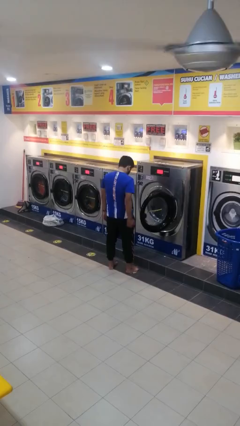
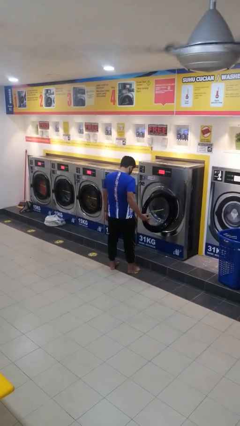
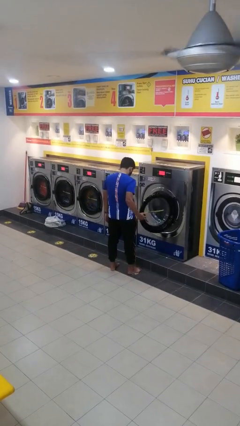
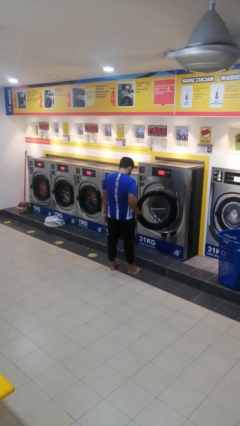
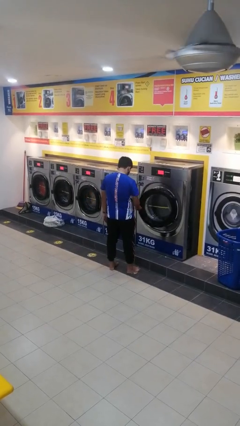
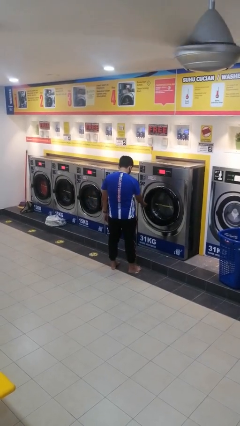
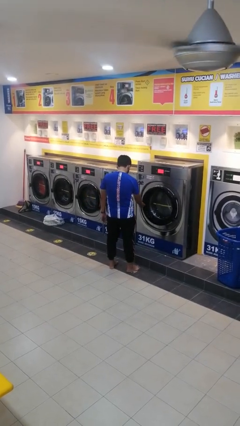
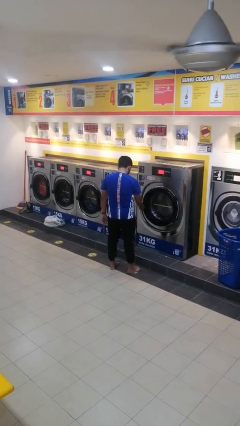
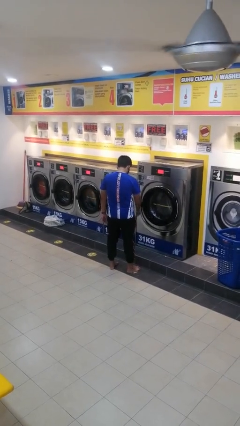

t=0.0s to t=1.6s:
person closes clothes washer

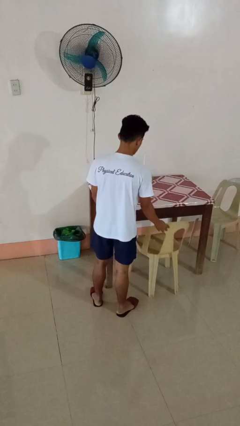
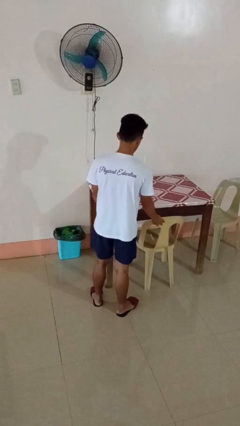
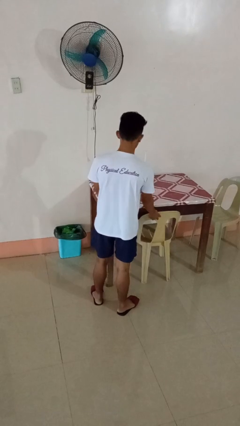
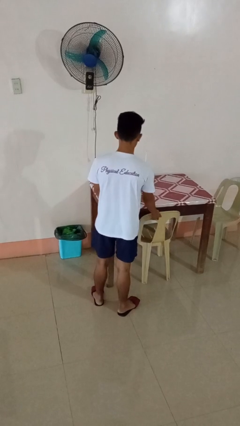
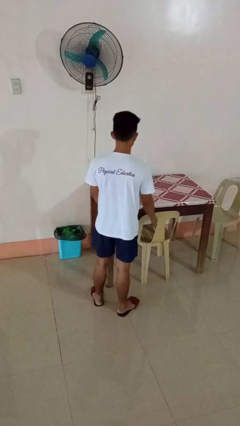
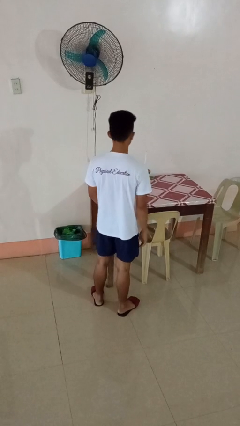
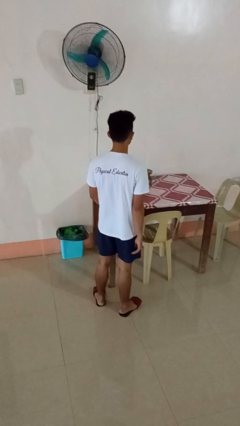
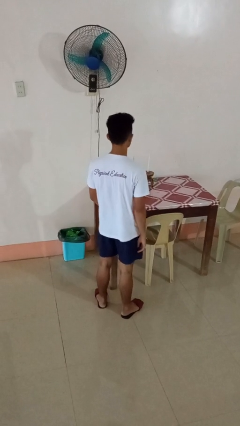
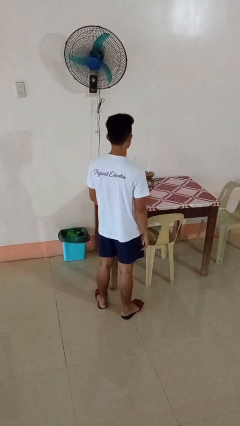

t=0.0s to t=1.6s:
person pushes in chair

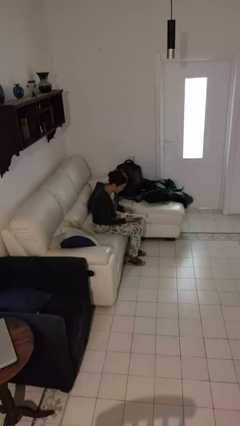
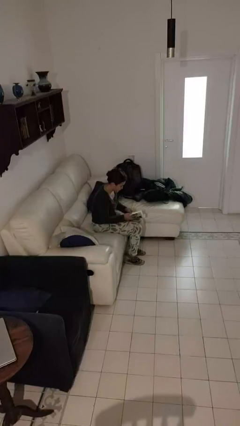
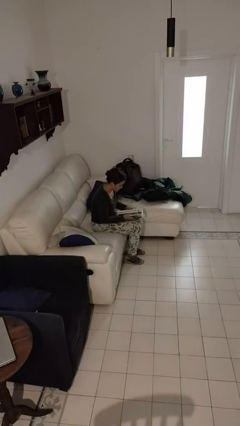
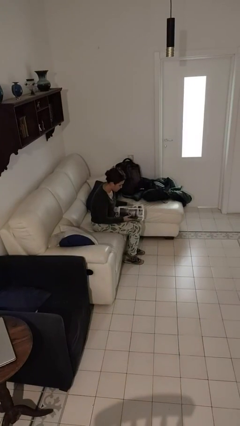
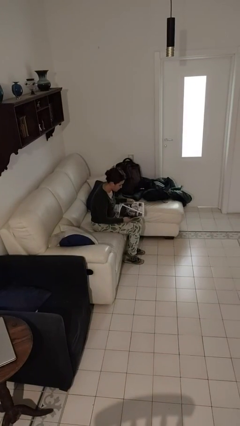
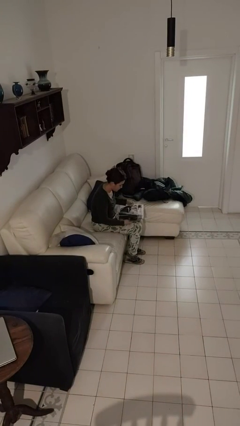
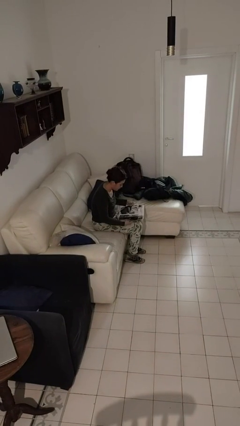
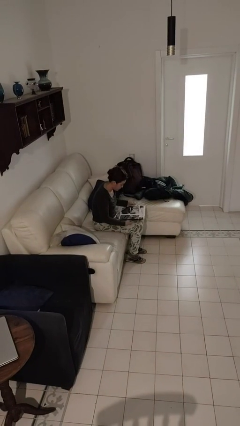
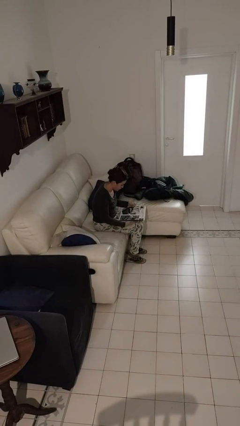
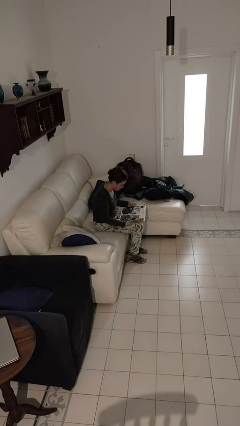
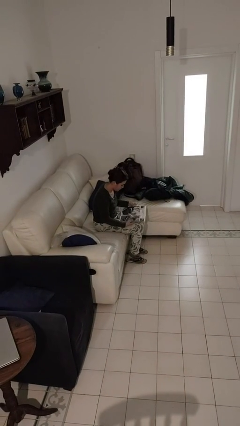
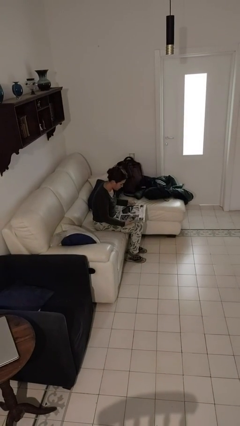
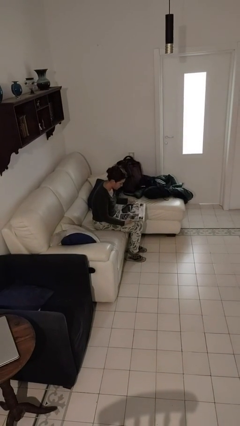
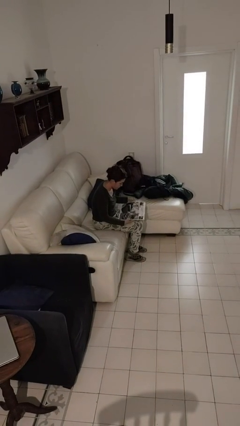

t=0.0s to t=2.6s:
person reads magazine

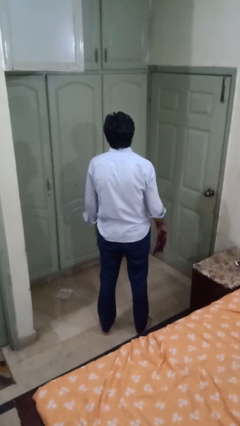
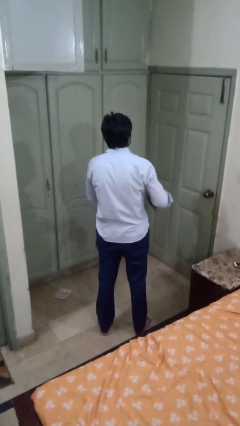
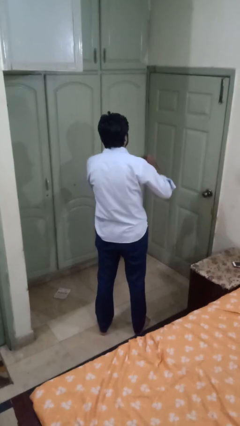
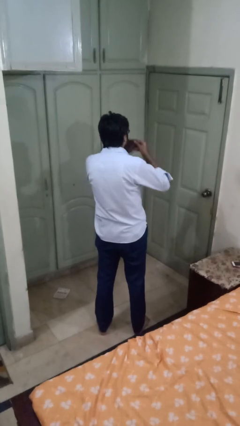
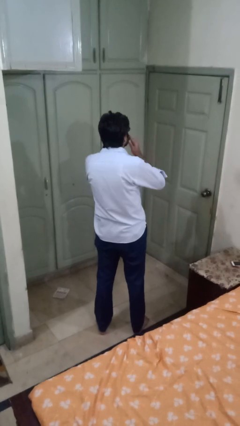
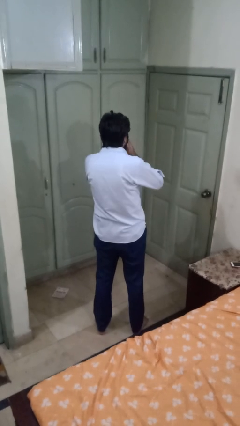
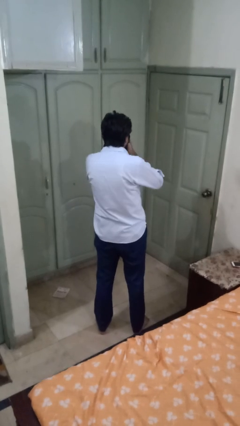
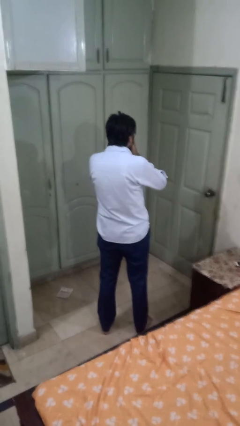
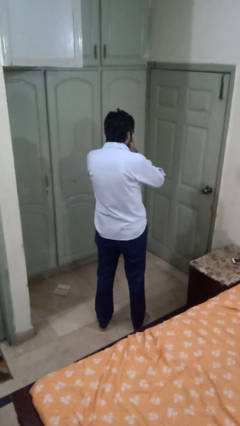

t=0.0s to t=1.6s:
person blows nose

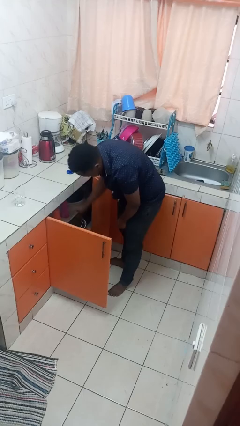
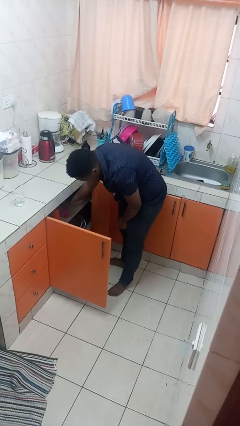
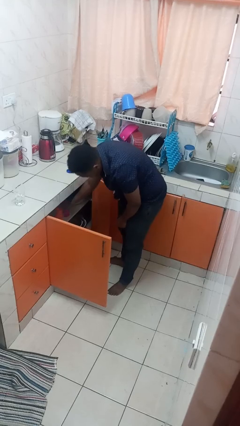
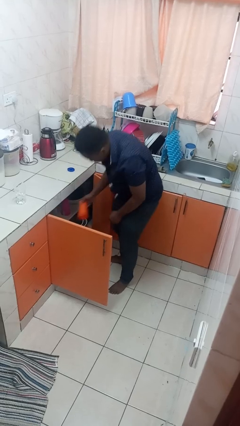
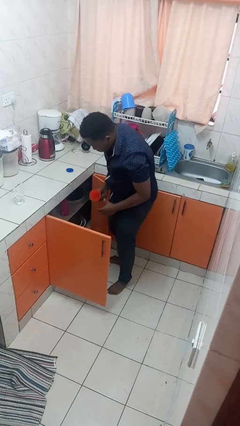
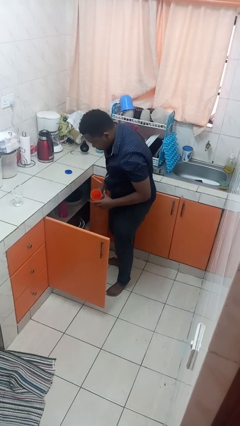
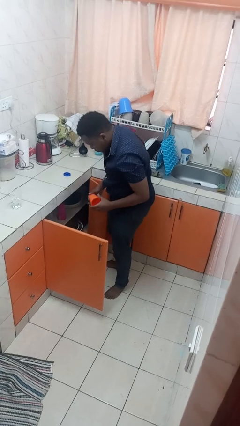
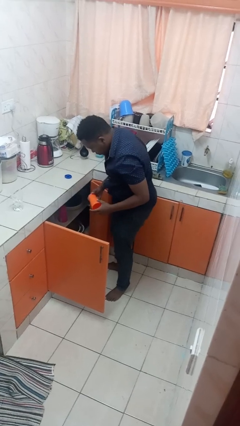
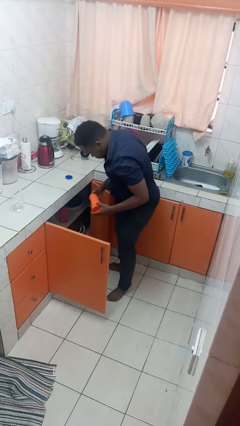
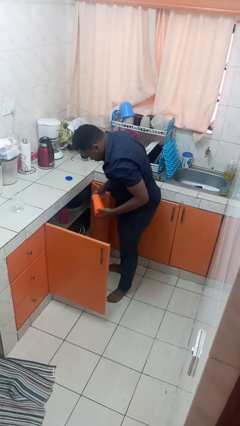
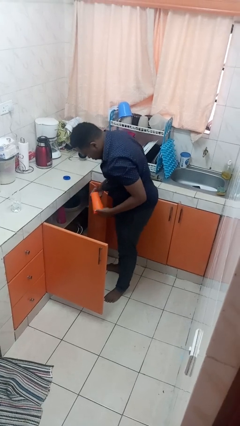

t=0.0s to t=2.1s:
person takes object from cabinet

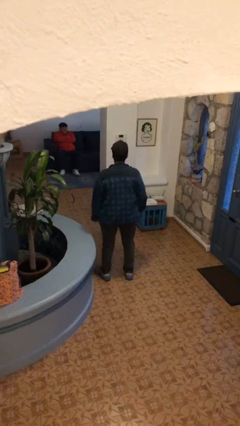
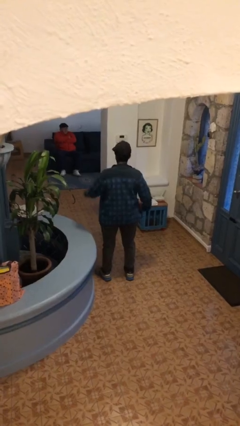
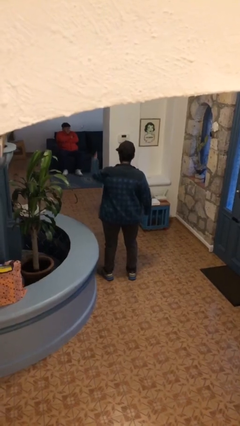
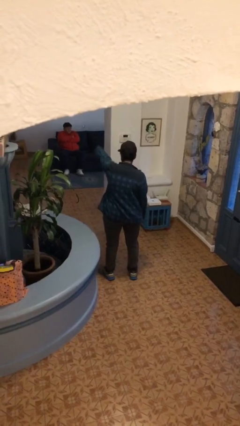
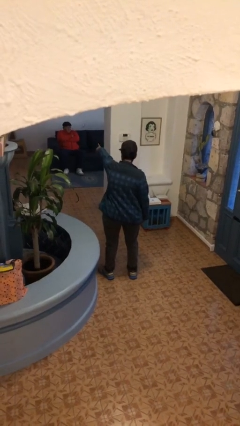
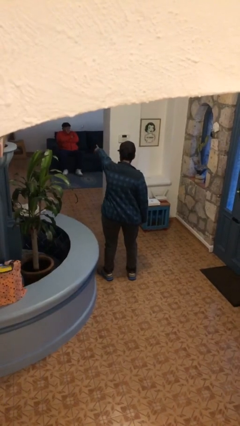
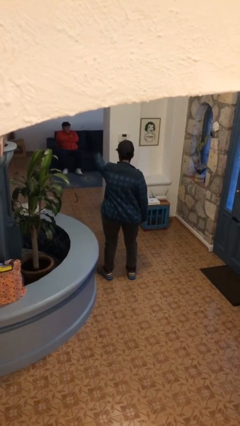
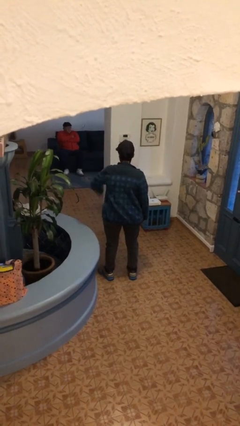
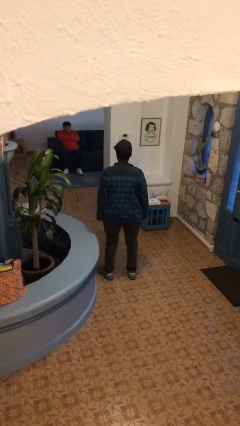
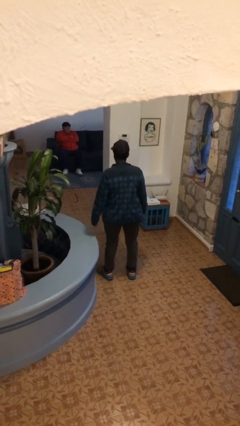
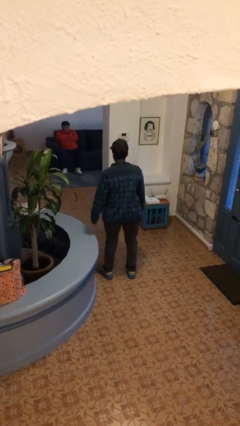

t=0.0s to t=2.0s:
person points at person

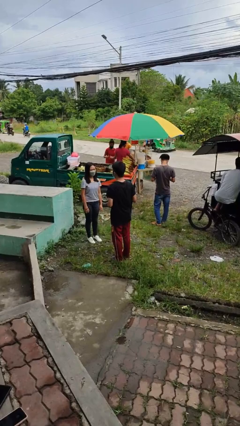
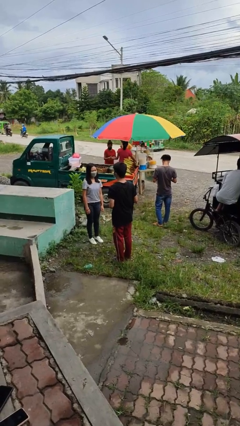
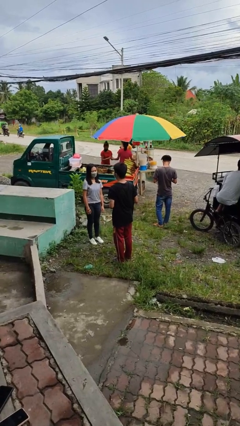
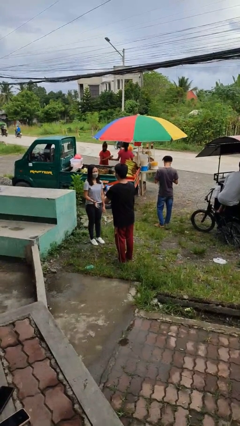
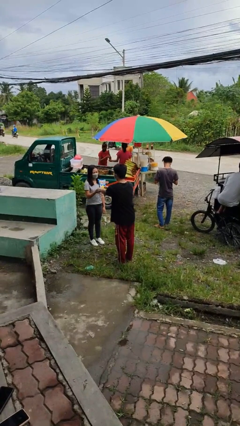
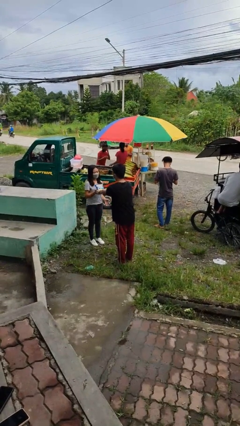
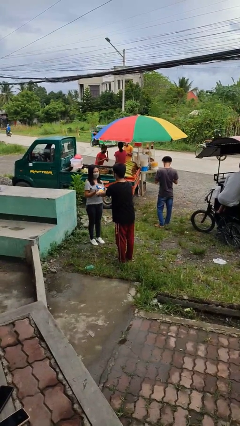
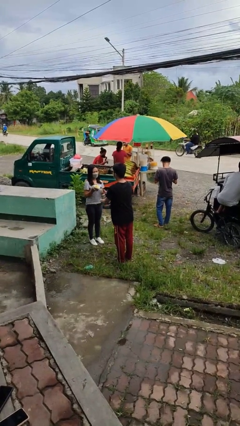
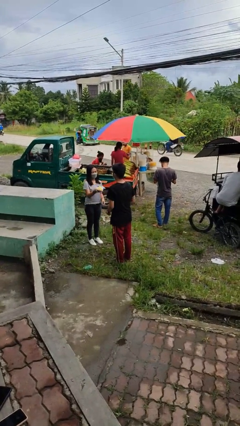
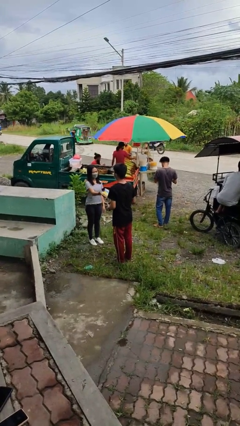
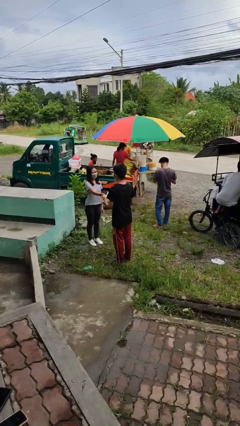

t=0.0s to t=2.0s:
person transfers object to person

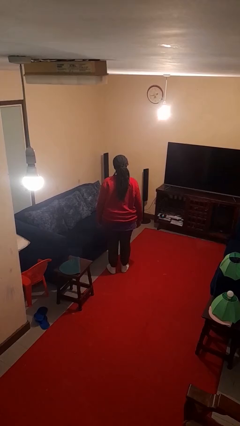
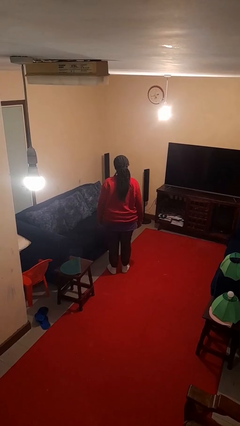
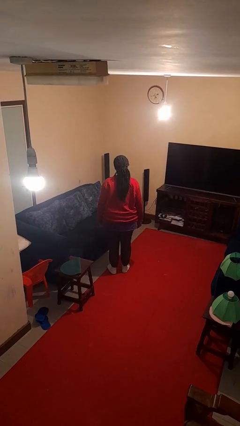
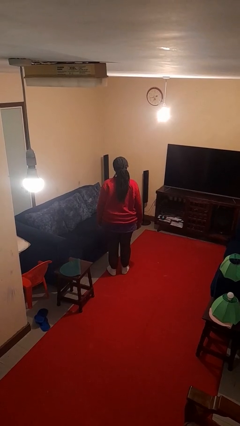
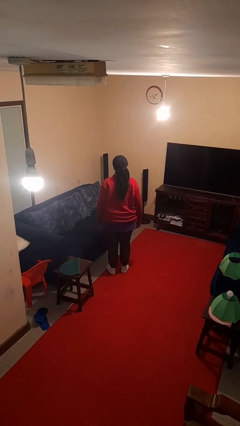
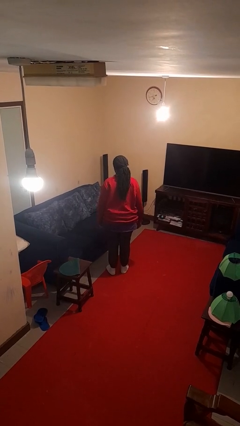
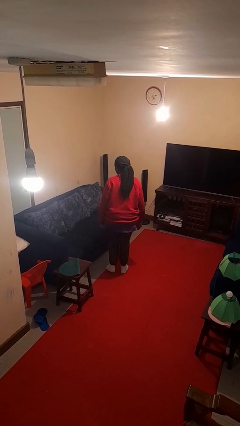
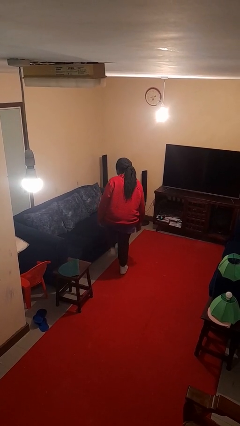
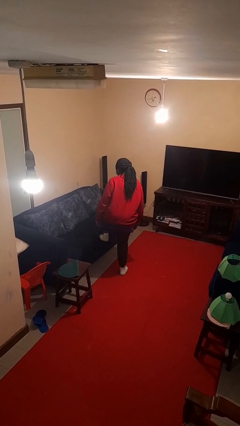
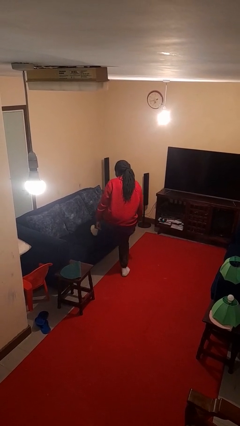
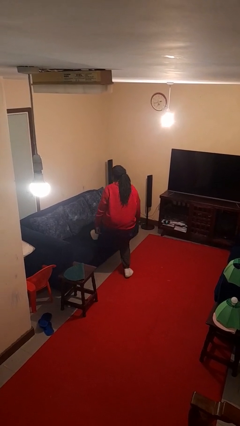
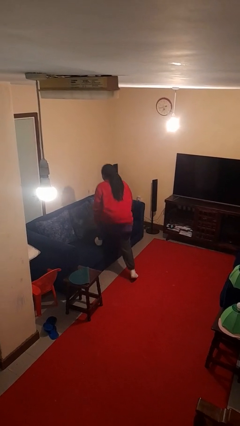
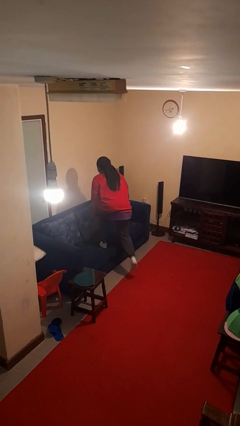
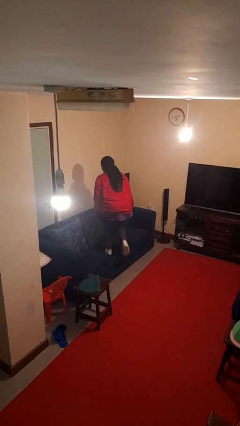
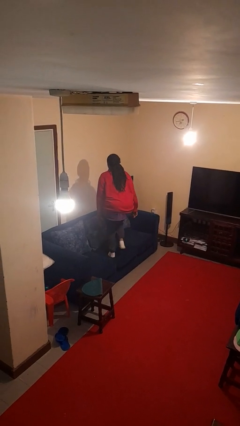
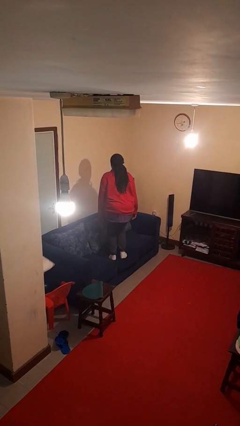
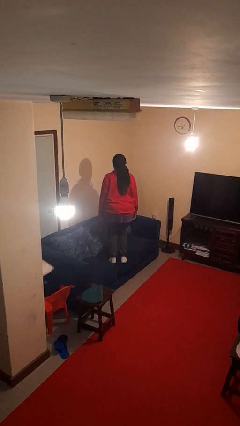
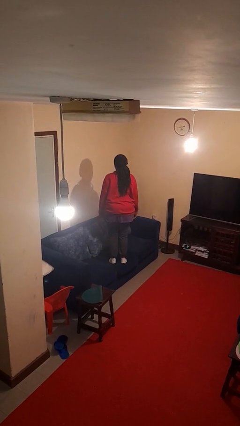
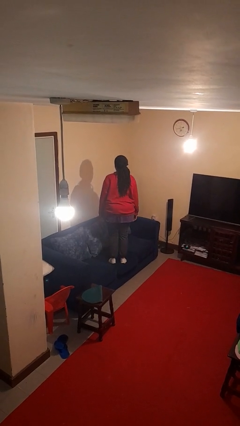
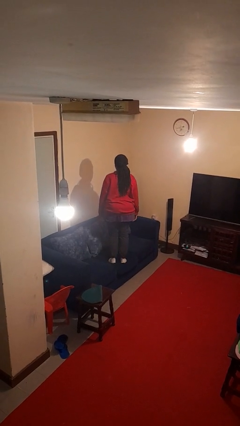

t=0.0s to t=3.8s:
person climbs on couch
